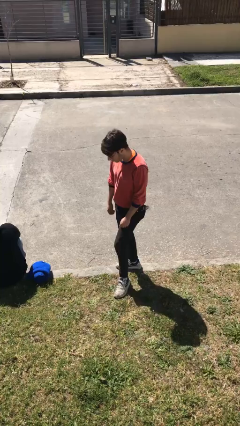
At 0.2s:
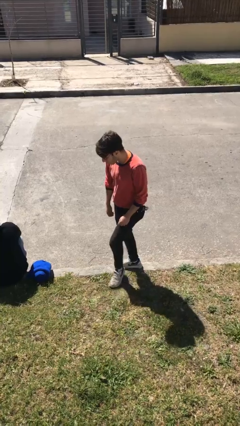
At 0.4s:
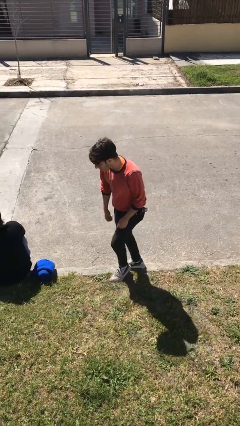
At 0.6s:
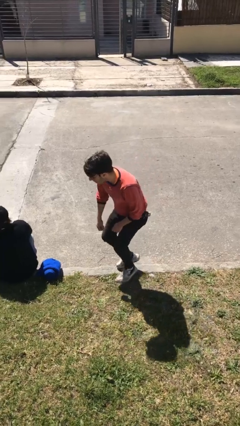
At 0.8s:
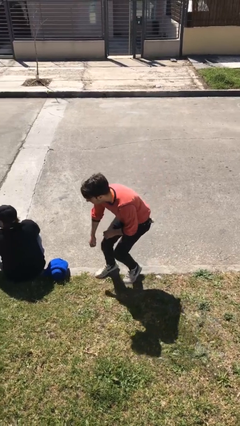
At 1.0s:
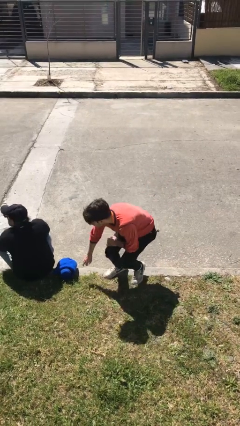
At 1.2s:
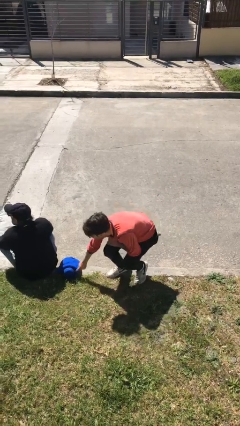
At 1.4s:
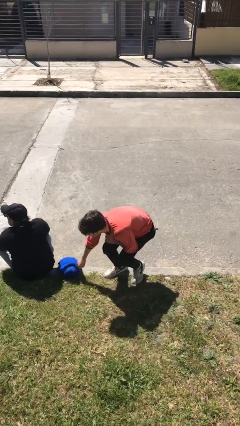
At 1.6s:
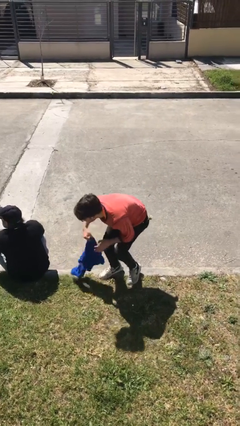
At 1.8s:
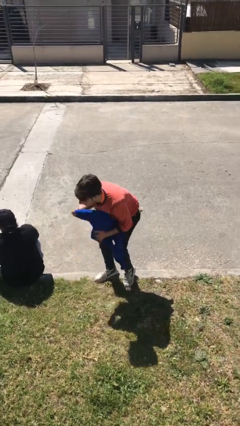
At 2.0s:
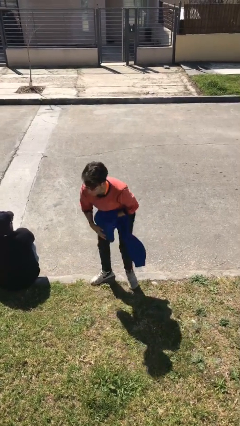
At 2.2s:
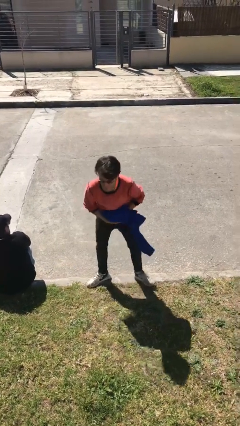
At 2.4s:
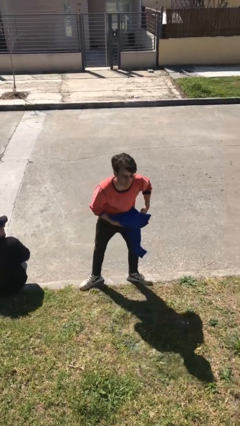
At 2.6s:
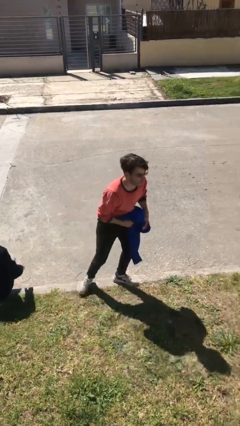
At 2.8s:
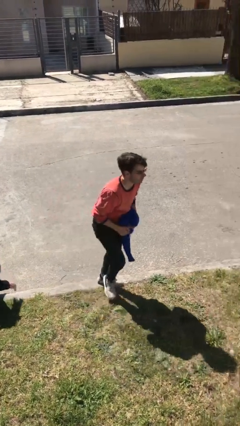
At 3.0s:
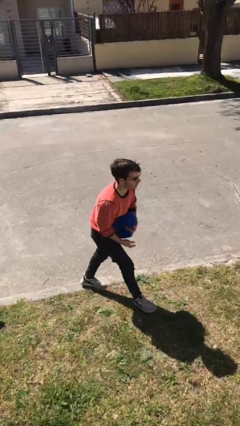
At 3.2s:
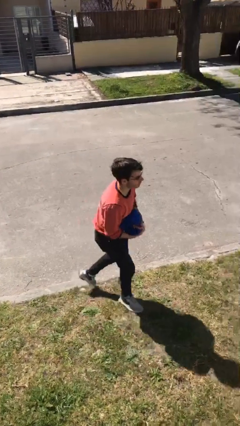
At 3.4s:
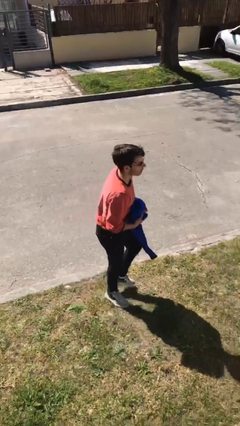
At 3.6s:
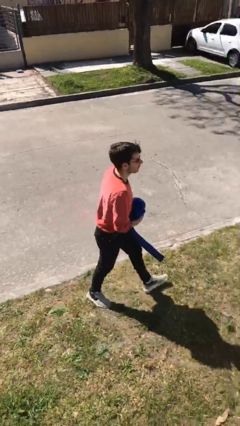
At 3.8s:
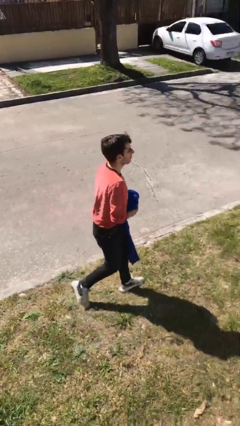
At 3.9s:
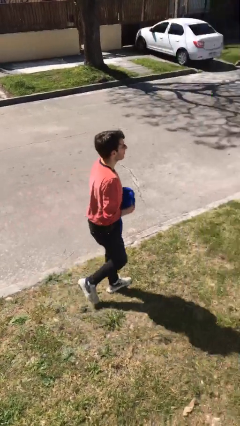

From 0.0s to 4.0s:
person steals object from person

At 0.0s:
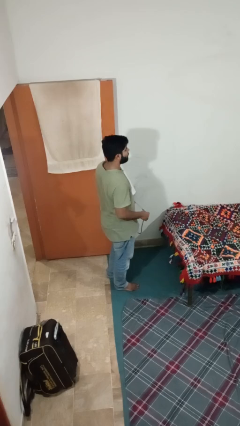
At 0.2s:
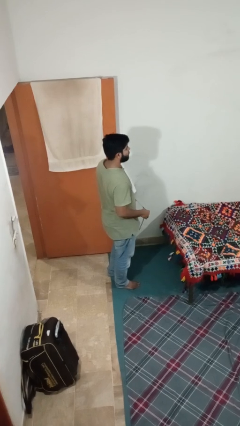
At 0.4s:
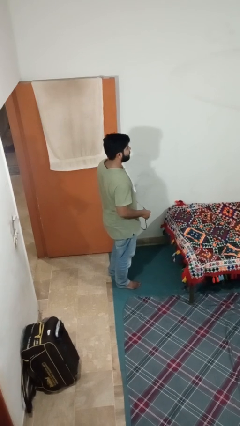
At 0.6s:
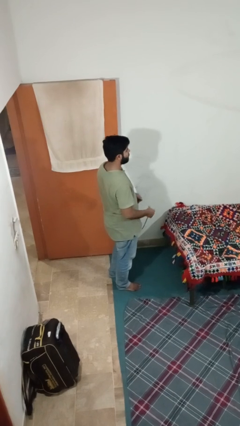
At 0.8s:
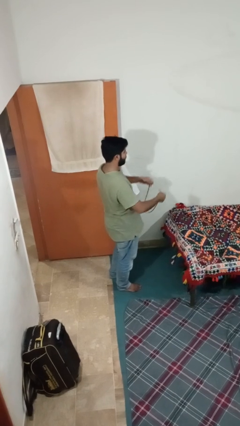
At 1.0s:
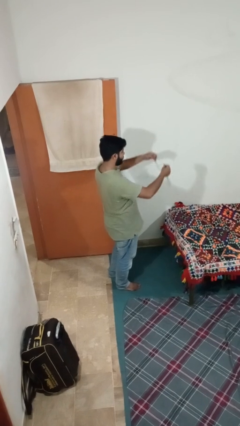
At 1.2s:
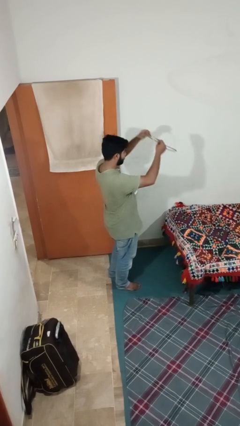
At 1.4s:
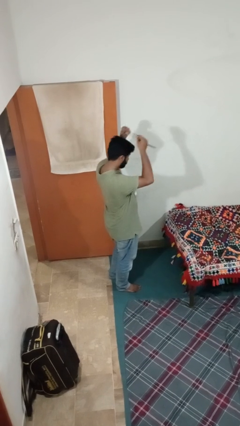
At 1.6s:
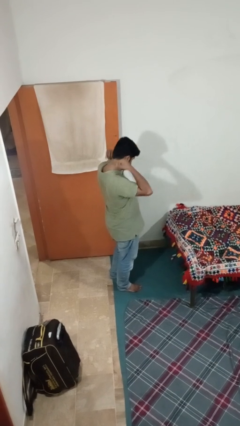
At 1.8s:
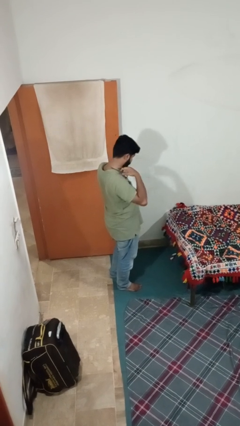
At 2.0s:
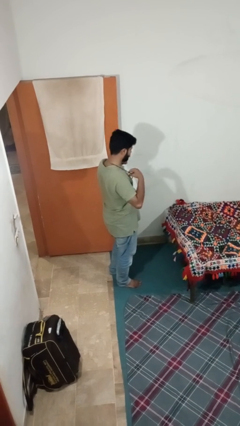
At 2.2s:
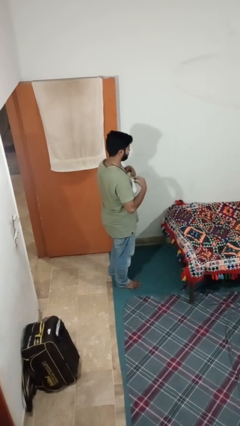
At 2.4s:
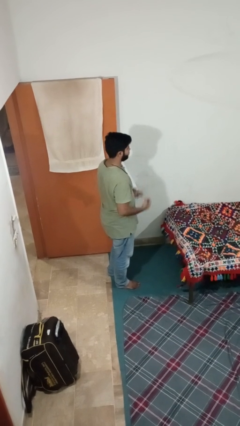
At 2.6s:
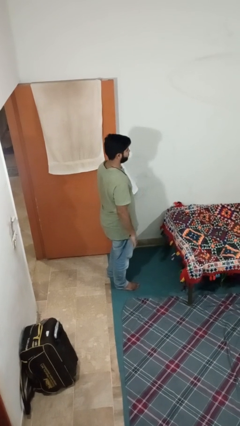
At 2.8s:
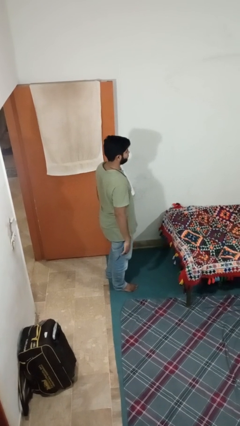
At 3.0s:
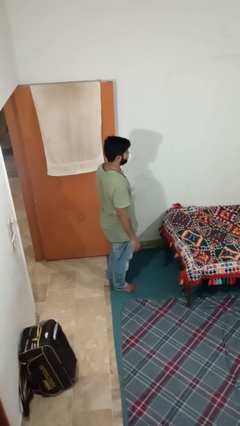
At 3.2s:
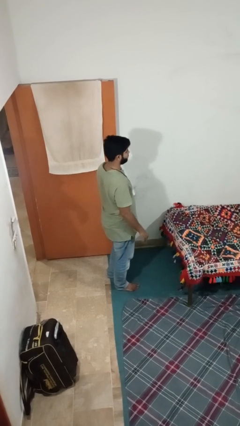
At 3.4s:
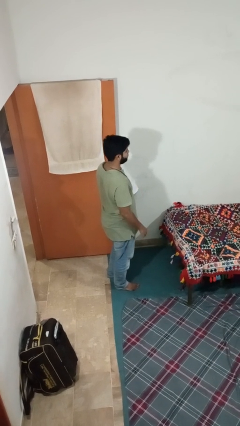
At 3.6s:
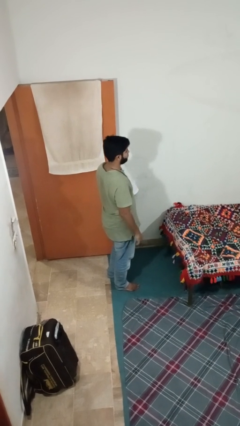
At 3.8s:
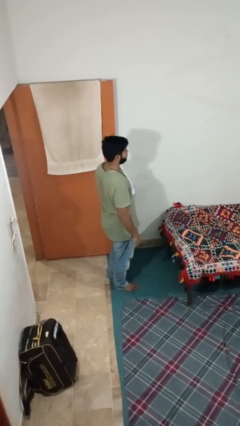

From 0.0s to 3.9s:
person puts on necklace

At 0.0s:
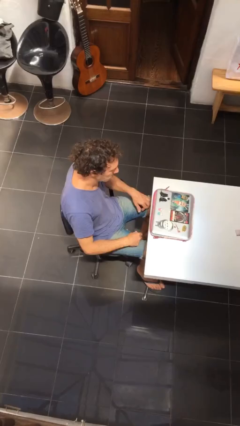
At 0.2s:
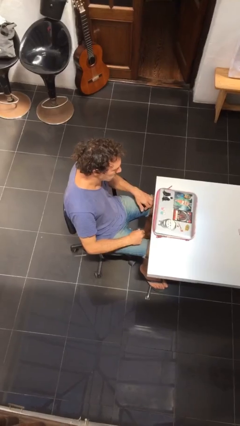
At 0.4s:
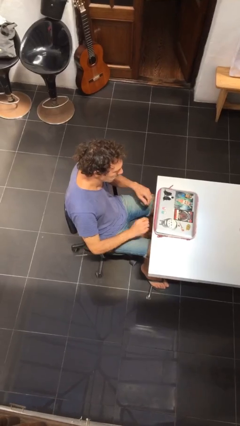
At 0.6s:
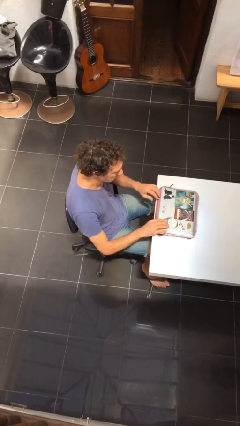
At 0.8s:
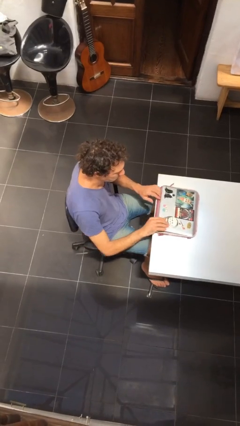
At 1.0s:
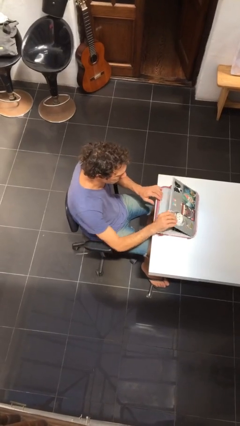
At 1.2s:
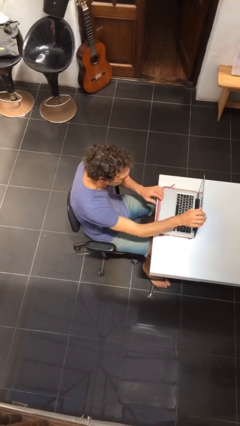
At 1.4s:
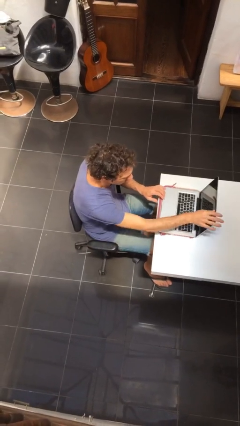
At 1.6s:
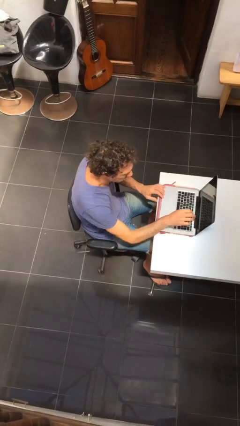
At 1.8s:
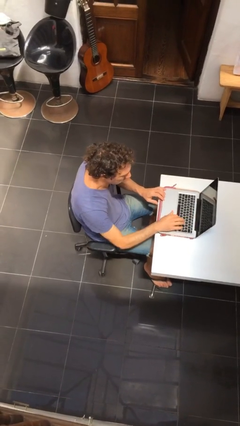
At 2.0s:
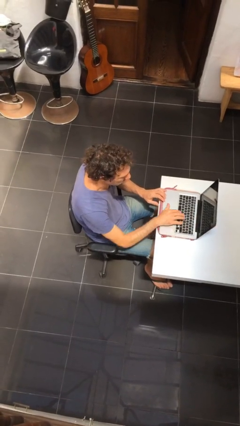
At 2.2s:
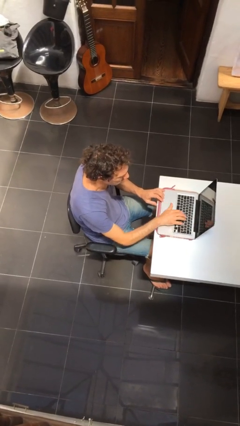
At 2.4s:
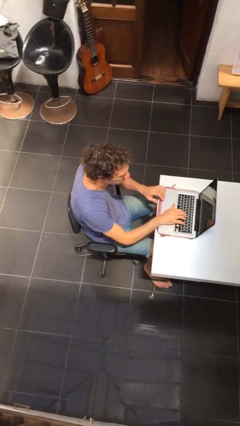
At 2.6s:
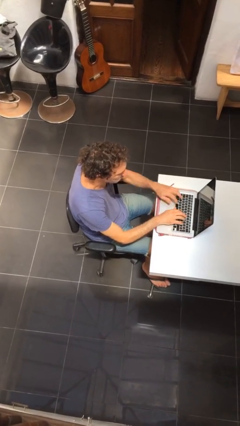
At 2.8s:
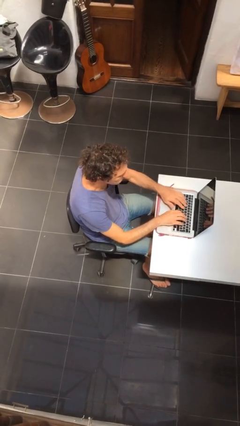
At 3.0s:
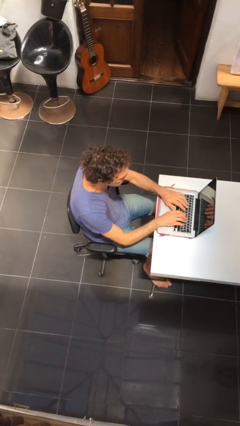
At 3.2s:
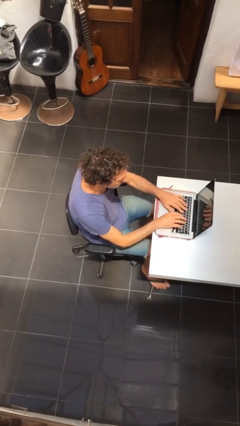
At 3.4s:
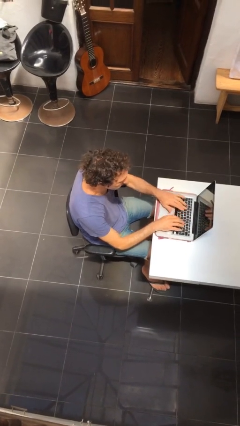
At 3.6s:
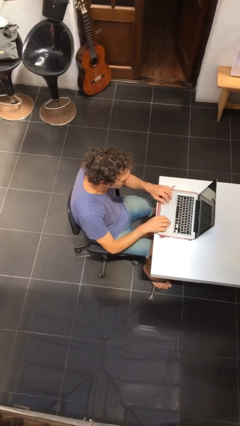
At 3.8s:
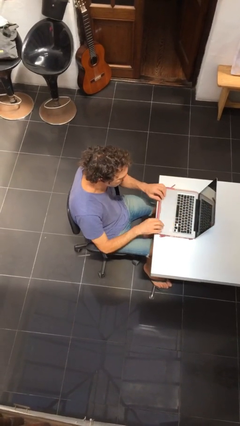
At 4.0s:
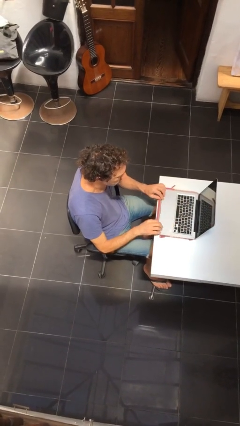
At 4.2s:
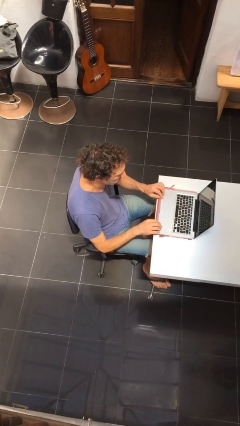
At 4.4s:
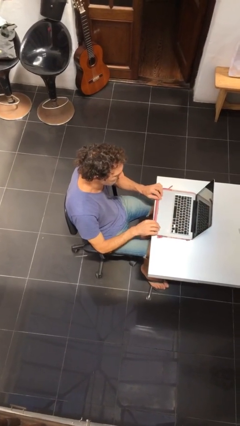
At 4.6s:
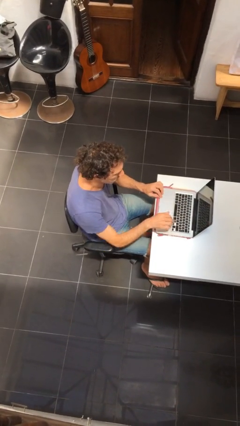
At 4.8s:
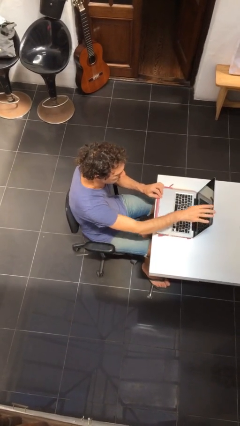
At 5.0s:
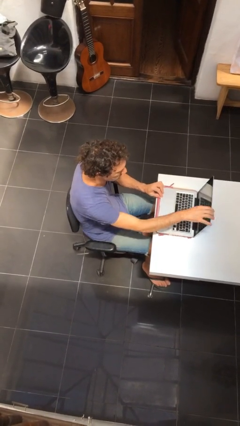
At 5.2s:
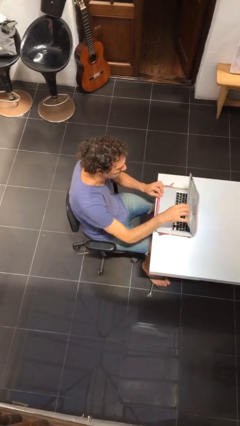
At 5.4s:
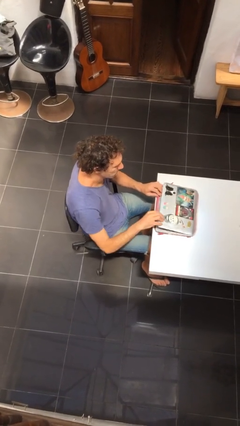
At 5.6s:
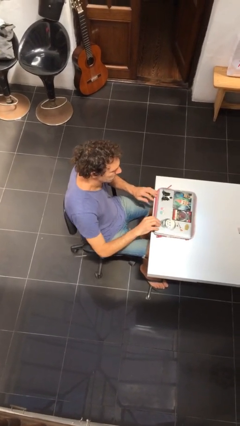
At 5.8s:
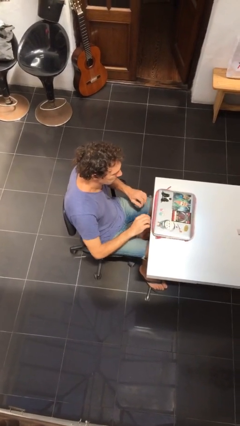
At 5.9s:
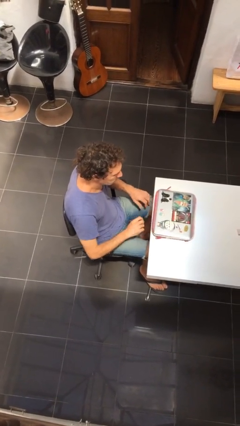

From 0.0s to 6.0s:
person interacts with laptop

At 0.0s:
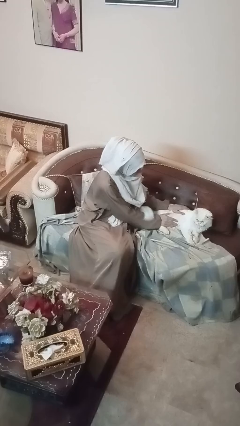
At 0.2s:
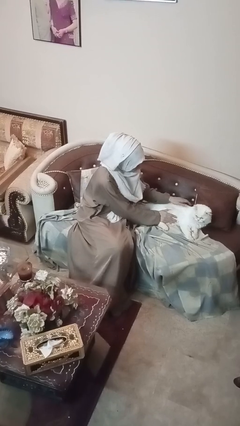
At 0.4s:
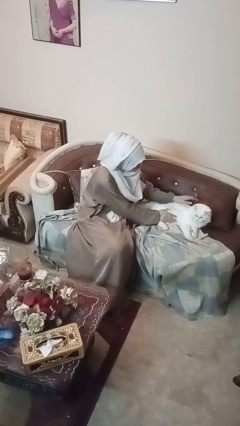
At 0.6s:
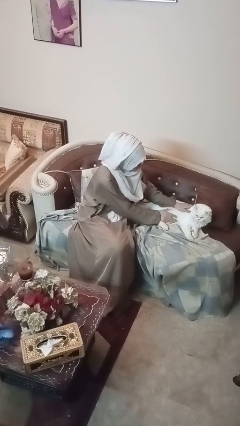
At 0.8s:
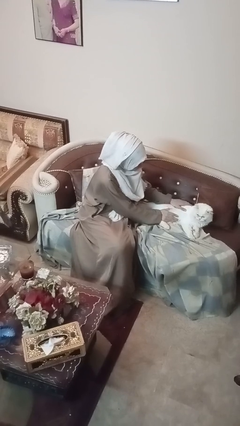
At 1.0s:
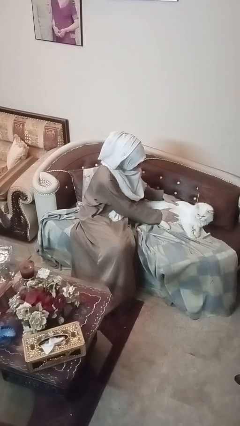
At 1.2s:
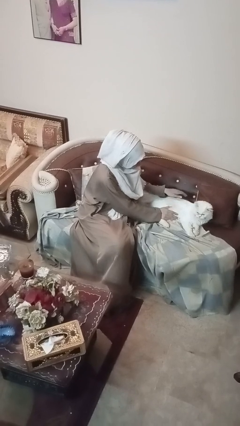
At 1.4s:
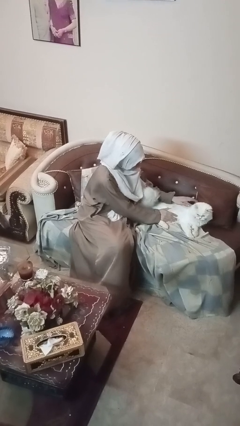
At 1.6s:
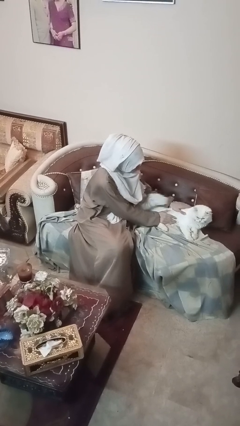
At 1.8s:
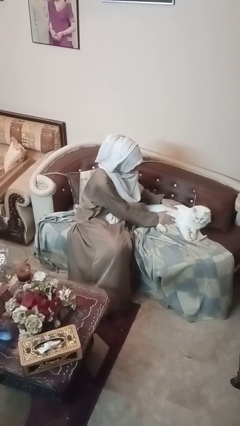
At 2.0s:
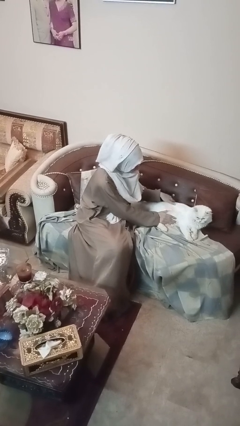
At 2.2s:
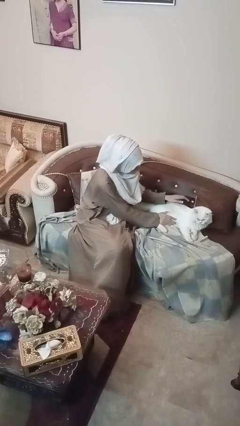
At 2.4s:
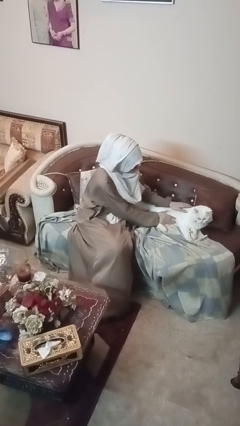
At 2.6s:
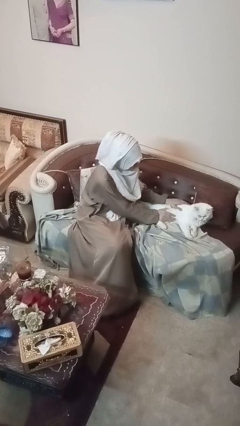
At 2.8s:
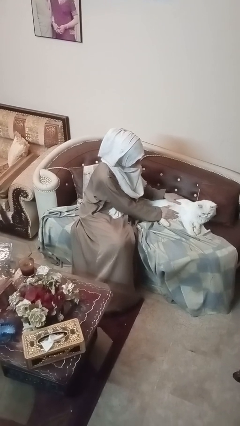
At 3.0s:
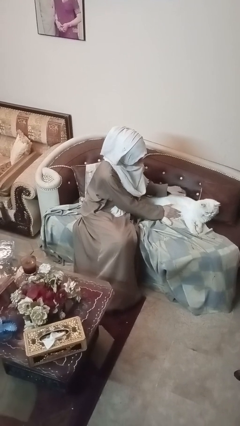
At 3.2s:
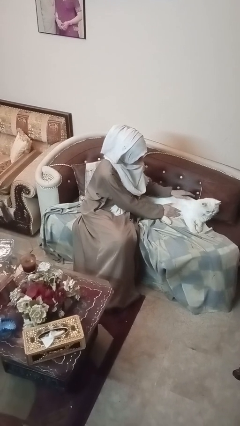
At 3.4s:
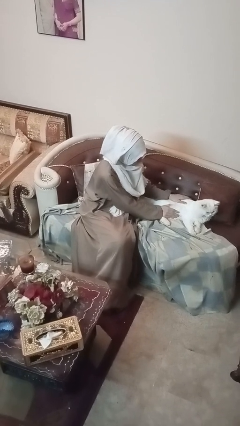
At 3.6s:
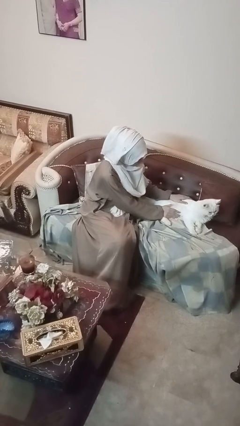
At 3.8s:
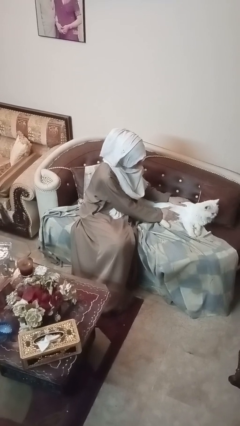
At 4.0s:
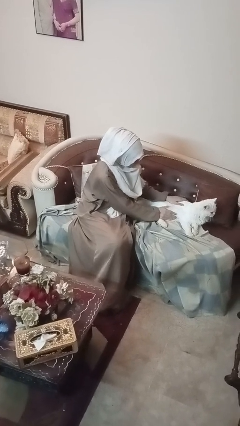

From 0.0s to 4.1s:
person pets cat
